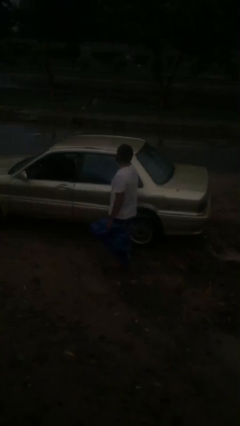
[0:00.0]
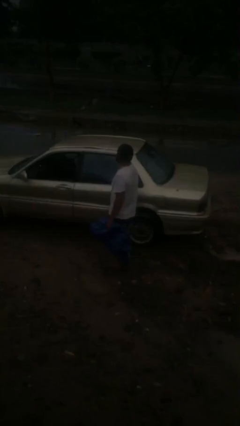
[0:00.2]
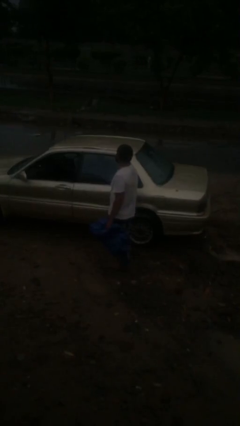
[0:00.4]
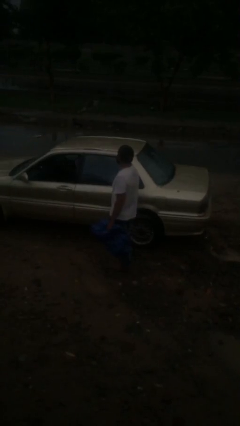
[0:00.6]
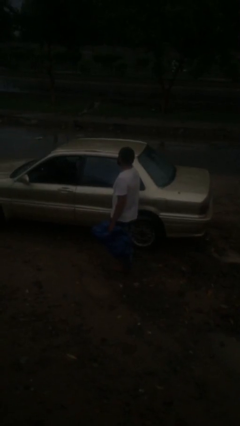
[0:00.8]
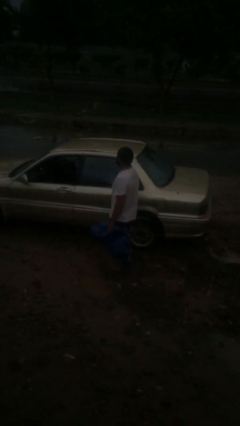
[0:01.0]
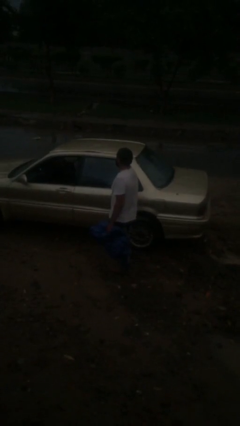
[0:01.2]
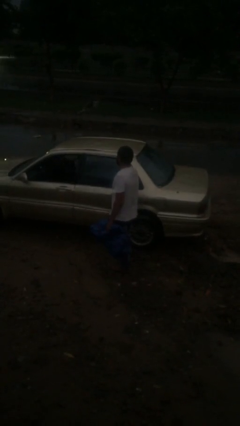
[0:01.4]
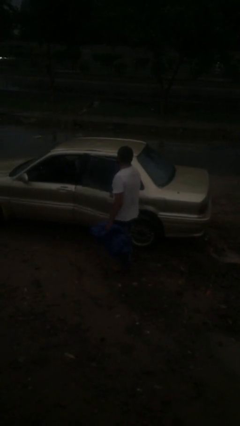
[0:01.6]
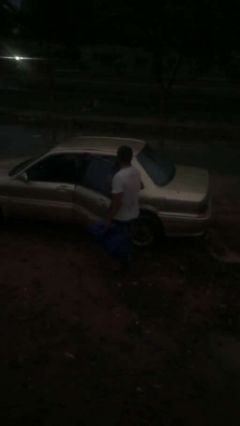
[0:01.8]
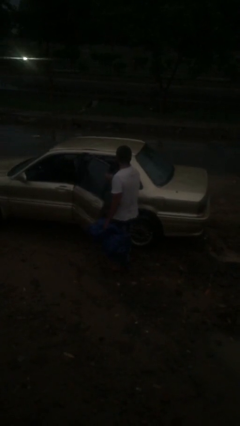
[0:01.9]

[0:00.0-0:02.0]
person opens car door

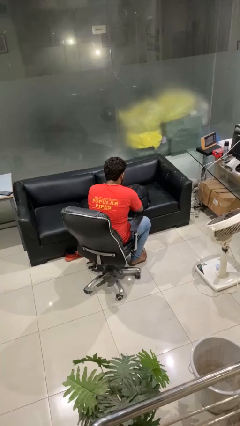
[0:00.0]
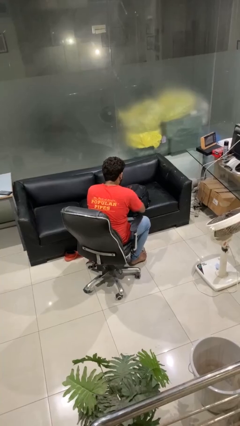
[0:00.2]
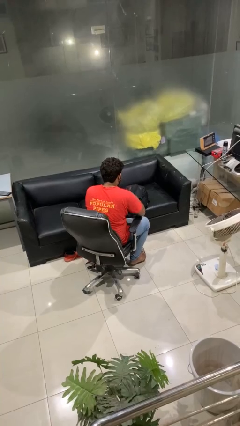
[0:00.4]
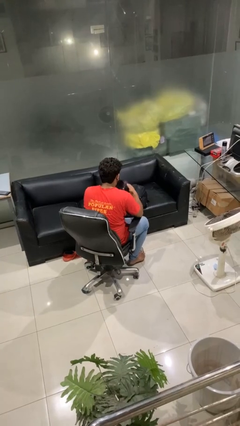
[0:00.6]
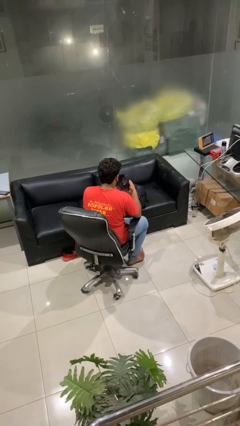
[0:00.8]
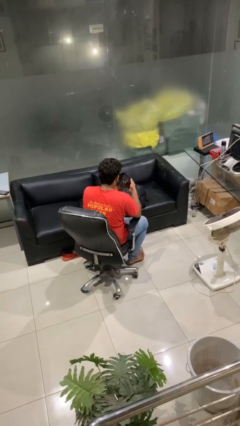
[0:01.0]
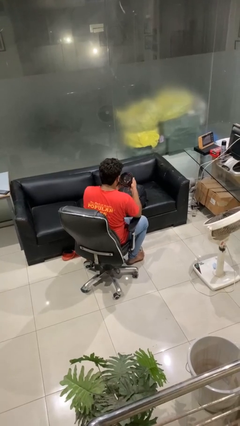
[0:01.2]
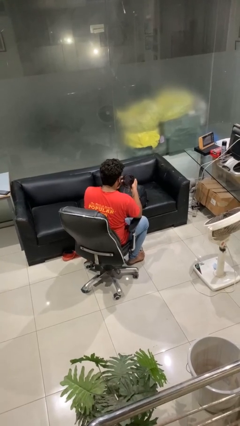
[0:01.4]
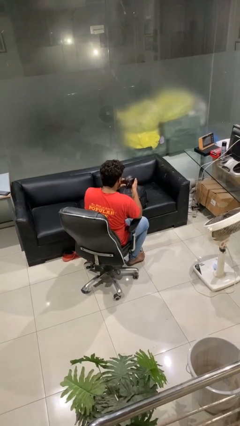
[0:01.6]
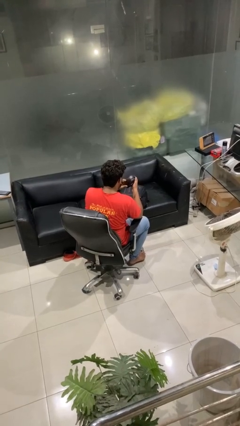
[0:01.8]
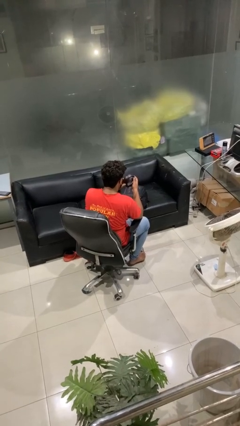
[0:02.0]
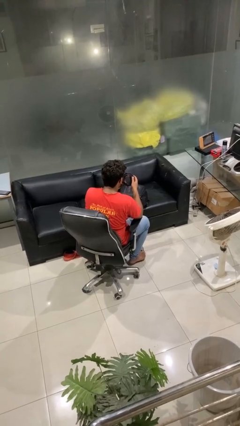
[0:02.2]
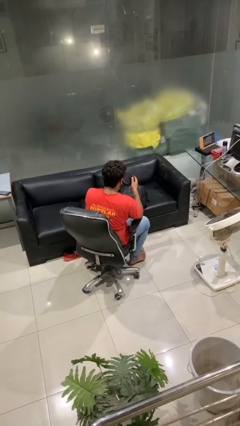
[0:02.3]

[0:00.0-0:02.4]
person takes object from backpack

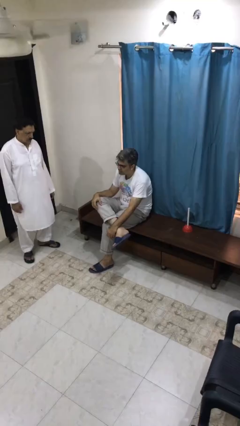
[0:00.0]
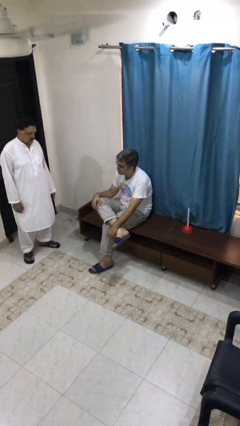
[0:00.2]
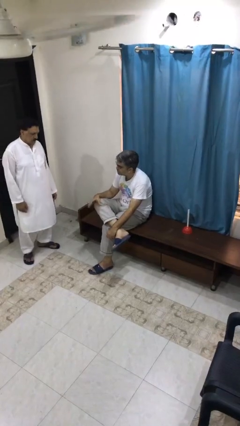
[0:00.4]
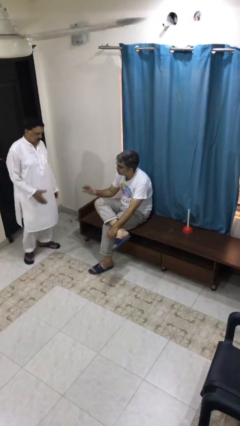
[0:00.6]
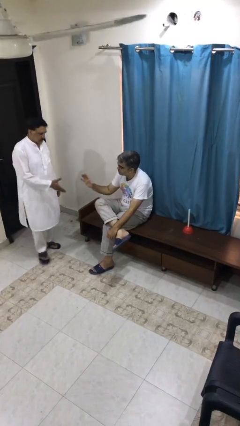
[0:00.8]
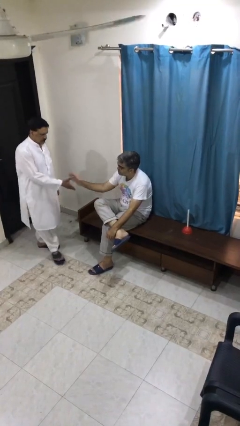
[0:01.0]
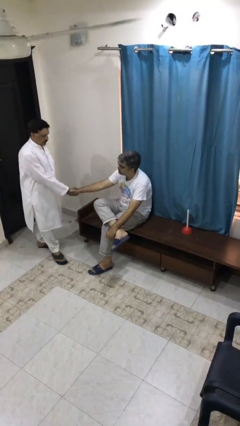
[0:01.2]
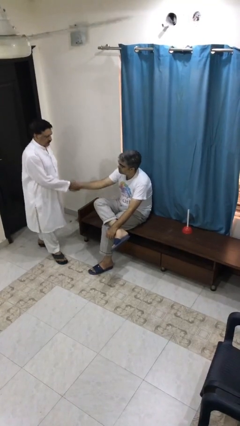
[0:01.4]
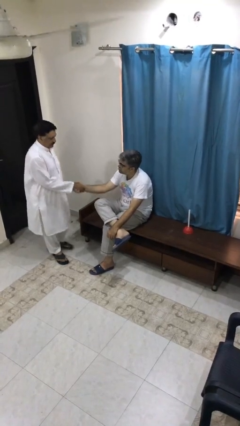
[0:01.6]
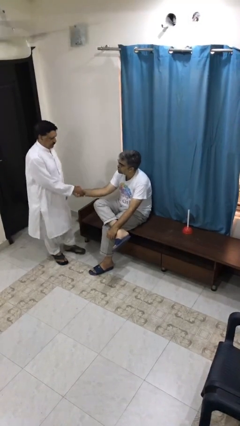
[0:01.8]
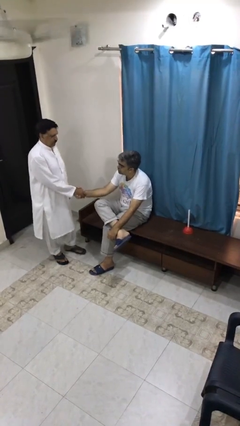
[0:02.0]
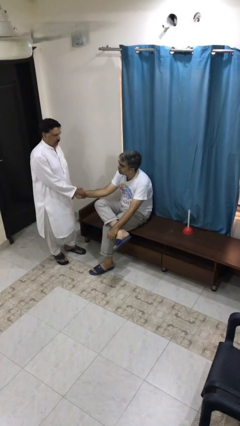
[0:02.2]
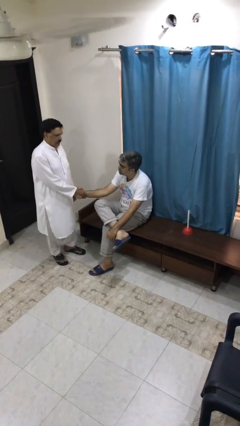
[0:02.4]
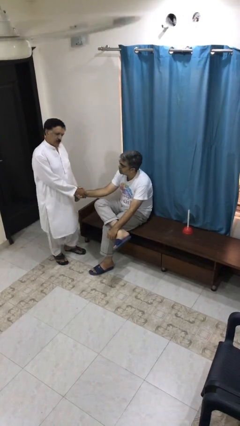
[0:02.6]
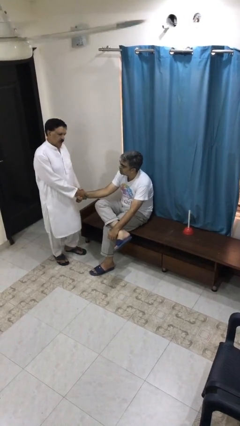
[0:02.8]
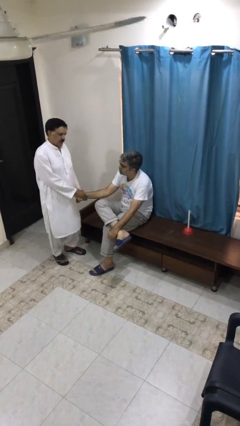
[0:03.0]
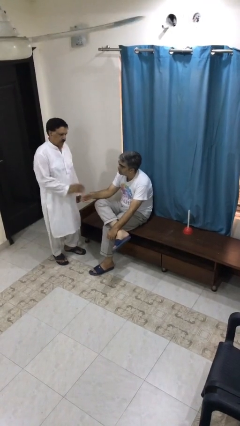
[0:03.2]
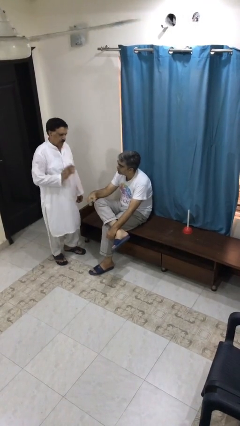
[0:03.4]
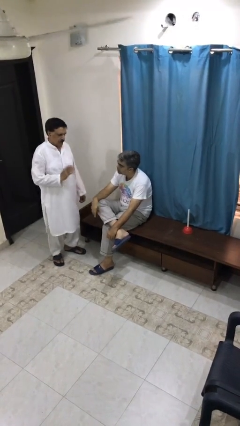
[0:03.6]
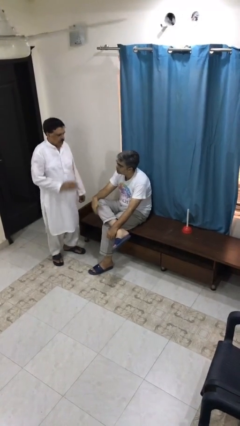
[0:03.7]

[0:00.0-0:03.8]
person shakes hand

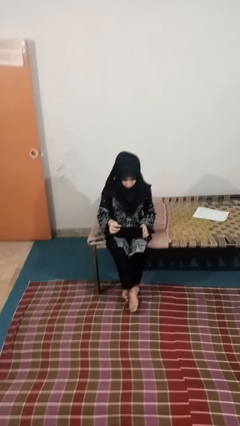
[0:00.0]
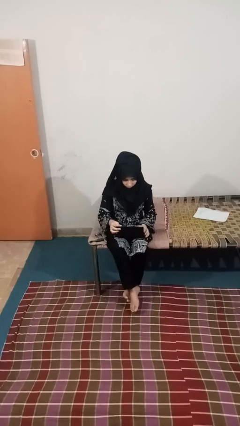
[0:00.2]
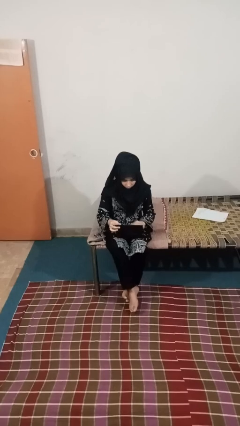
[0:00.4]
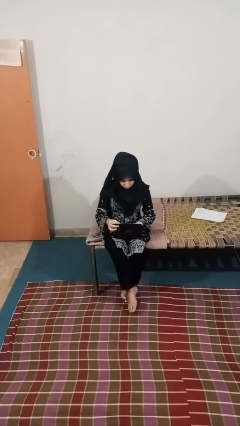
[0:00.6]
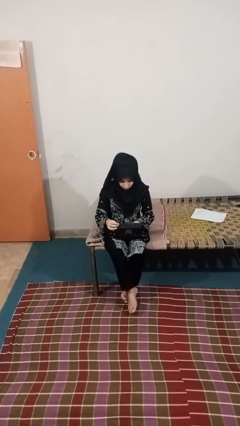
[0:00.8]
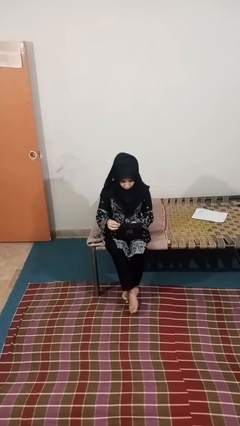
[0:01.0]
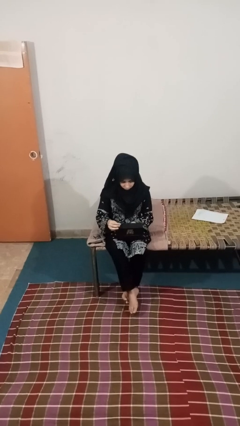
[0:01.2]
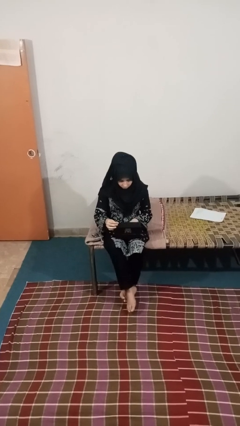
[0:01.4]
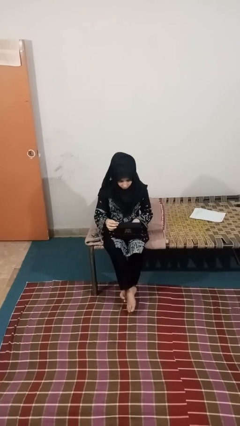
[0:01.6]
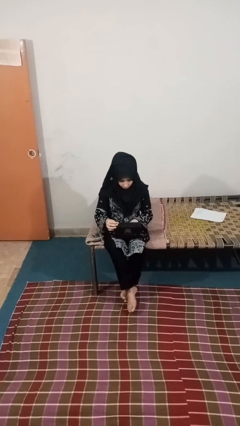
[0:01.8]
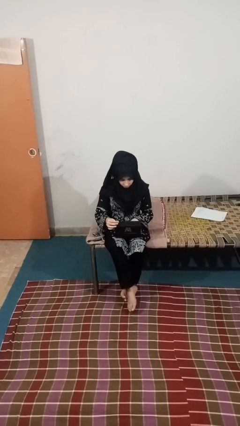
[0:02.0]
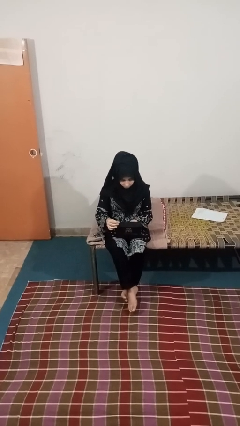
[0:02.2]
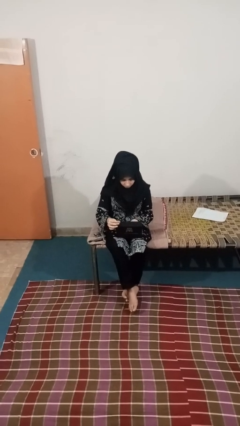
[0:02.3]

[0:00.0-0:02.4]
person searches jewelry box

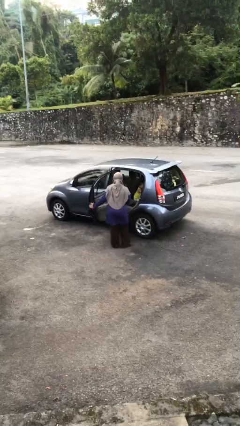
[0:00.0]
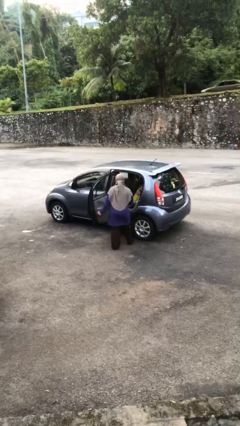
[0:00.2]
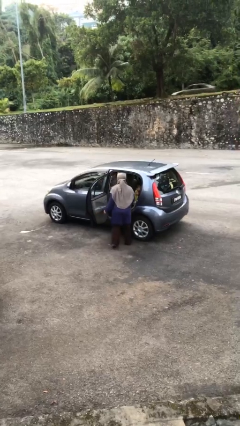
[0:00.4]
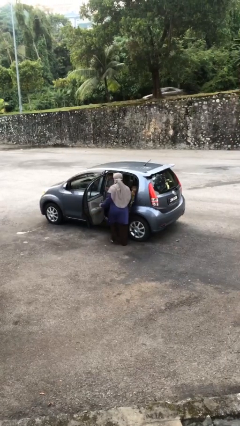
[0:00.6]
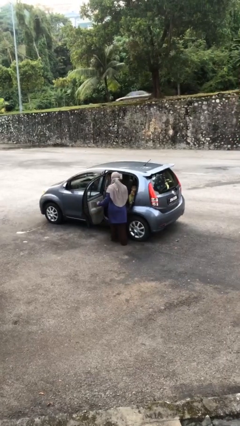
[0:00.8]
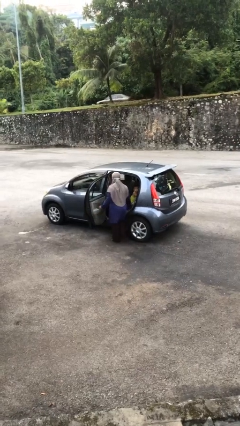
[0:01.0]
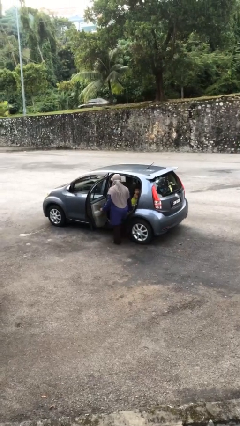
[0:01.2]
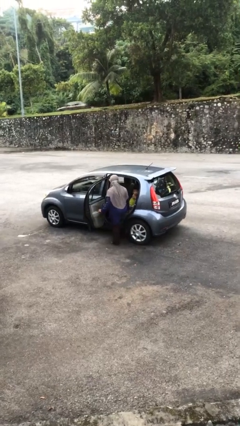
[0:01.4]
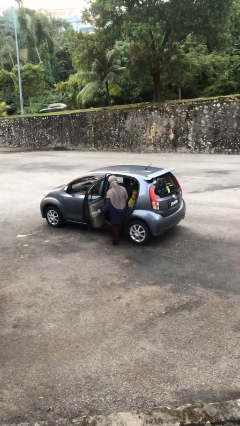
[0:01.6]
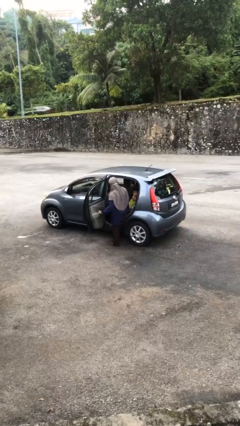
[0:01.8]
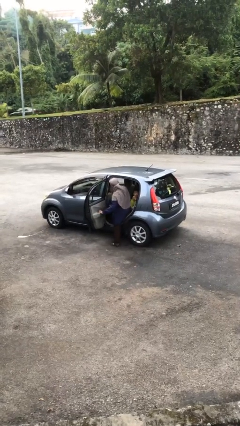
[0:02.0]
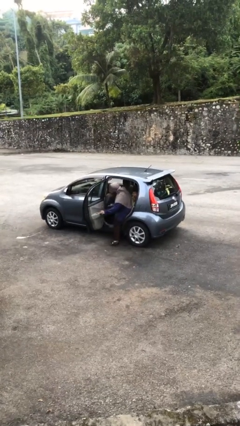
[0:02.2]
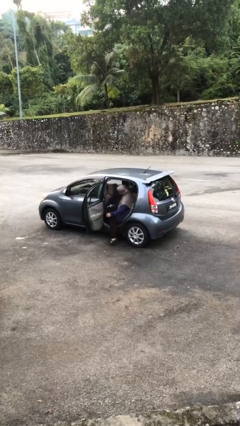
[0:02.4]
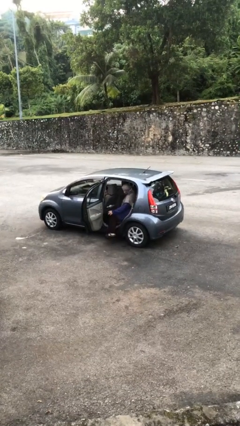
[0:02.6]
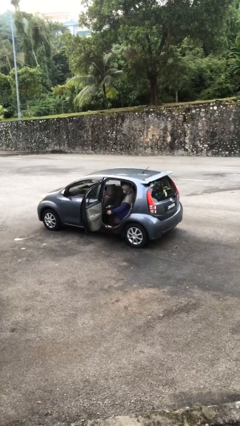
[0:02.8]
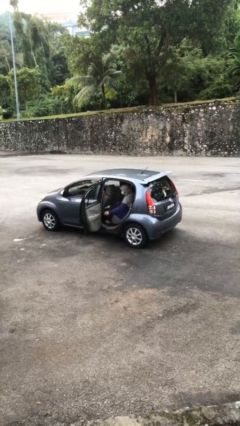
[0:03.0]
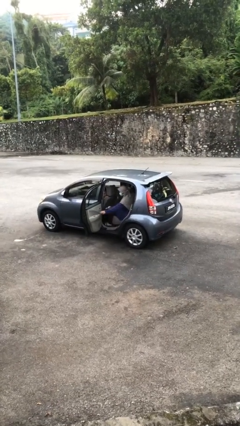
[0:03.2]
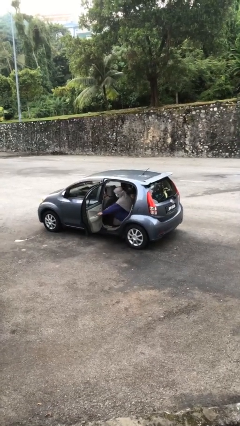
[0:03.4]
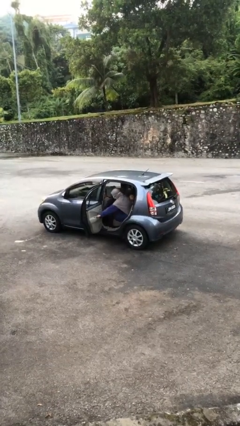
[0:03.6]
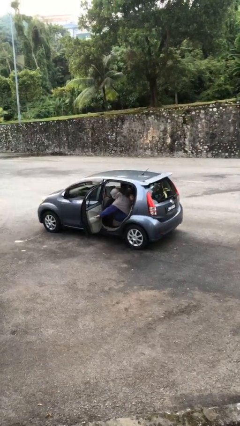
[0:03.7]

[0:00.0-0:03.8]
person enters car

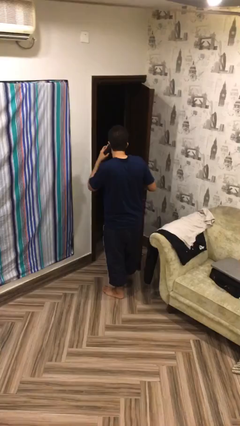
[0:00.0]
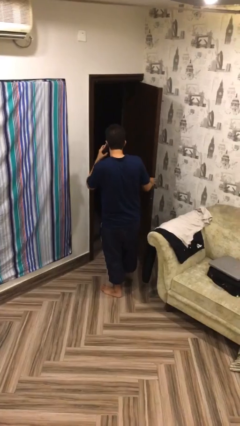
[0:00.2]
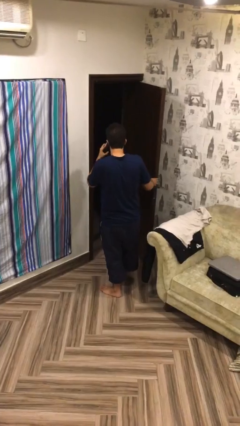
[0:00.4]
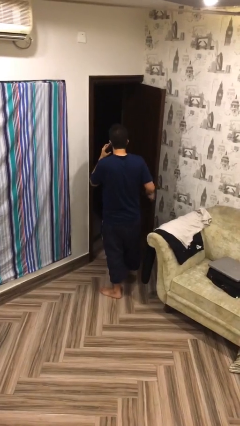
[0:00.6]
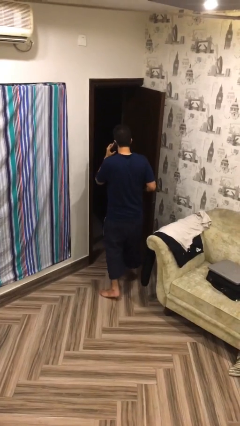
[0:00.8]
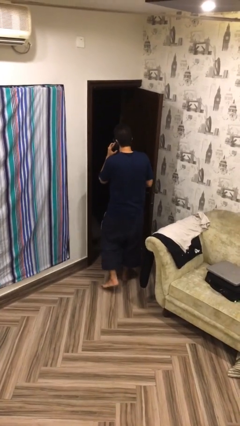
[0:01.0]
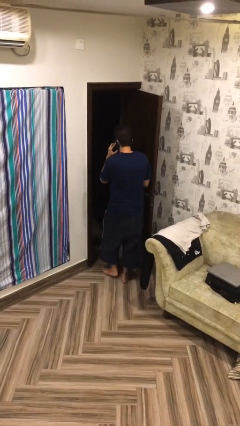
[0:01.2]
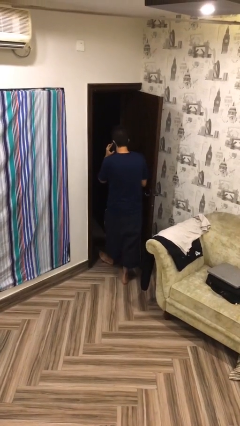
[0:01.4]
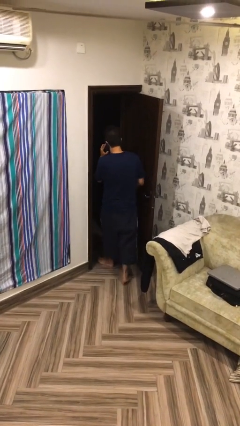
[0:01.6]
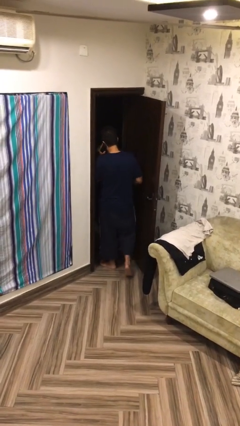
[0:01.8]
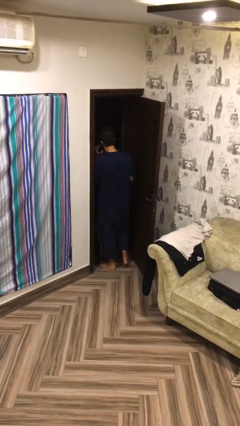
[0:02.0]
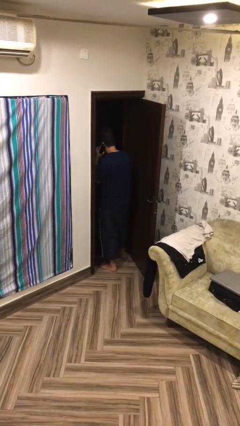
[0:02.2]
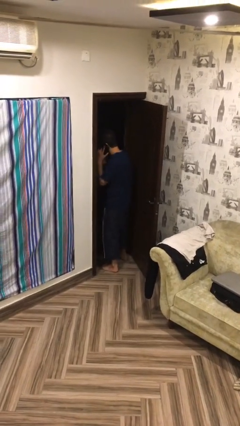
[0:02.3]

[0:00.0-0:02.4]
person exits scene through structure

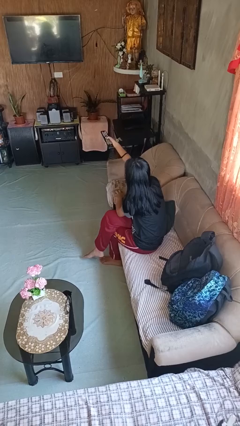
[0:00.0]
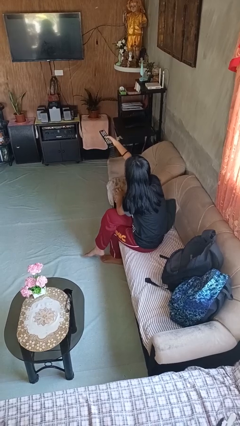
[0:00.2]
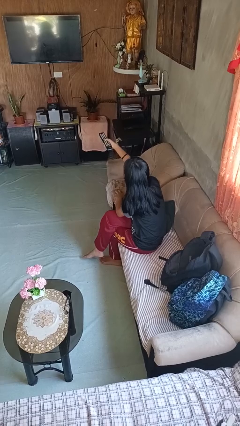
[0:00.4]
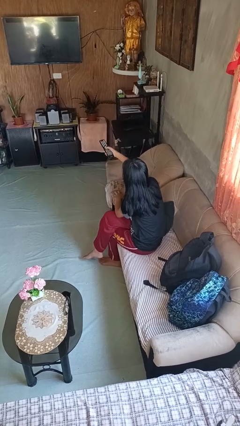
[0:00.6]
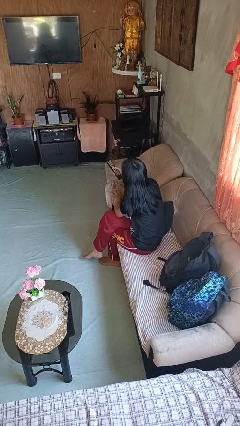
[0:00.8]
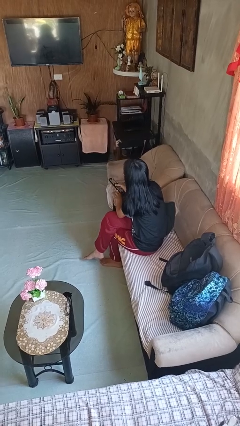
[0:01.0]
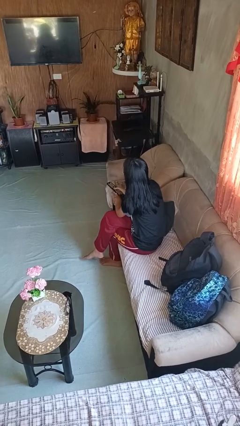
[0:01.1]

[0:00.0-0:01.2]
person uses television remote
